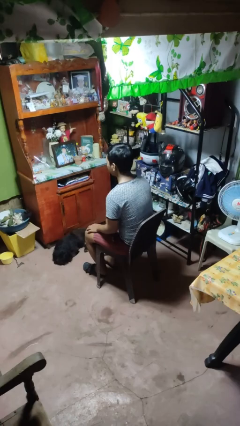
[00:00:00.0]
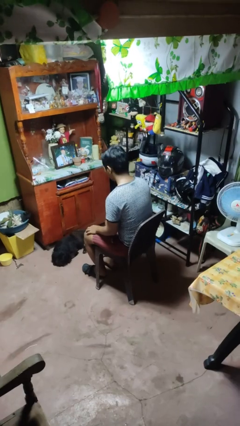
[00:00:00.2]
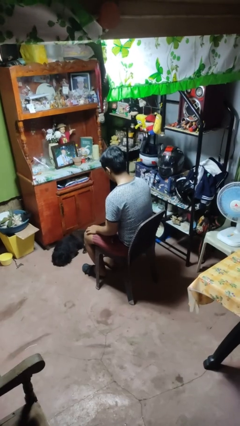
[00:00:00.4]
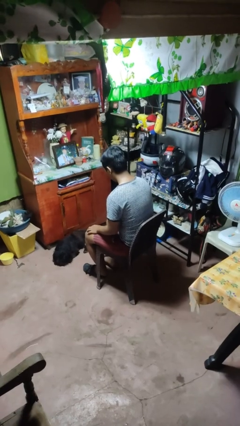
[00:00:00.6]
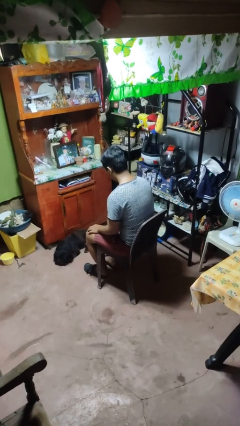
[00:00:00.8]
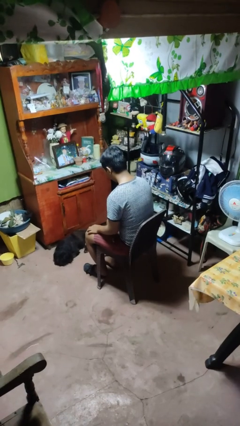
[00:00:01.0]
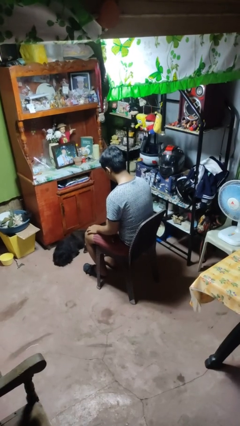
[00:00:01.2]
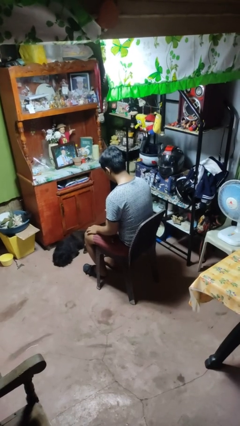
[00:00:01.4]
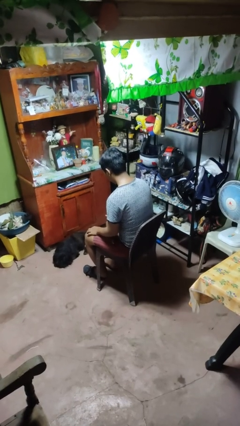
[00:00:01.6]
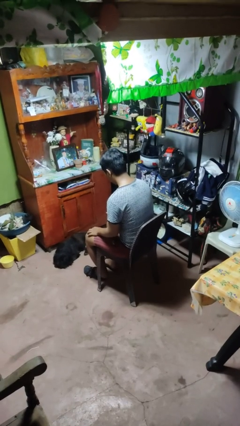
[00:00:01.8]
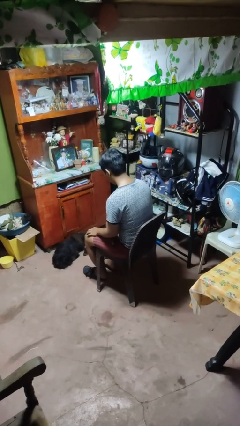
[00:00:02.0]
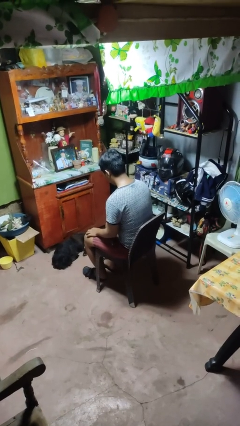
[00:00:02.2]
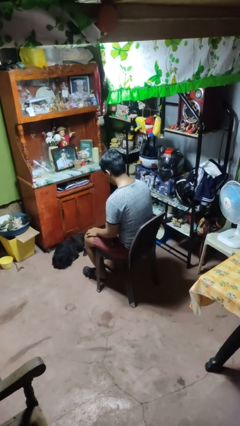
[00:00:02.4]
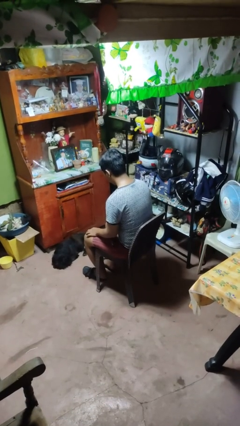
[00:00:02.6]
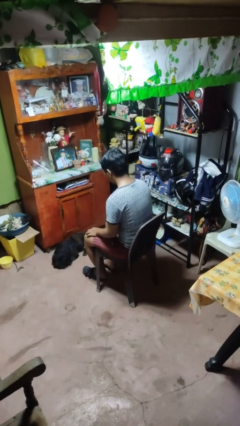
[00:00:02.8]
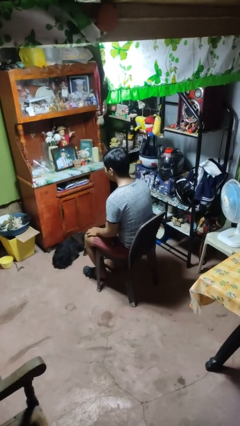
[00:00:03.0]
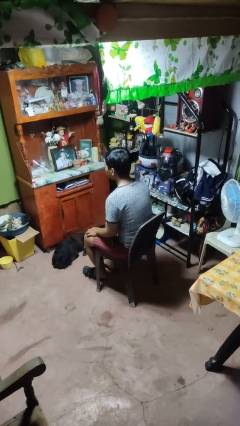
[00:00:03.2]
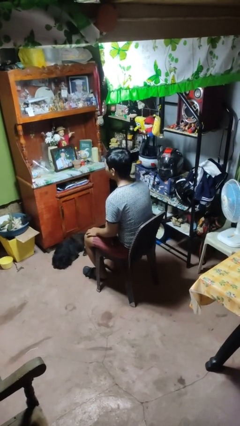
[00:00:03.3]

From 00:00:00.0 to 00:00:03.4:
person looks at hands in lap

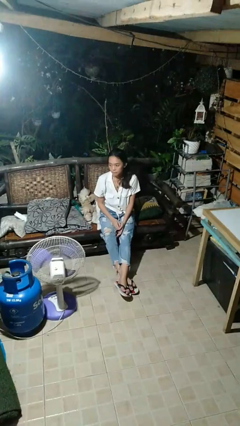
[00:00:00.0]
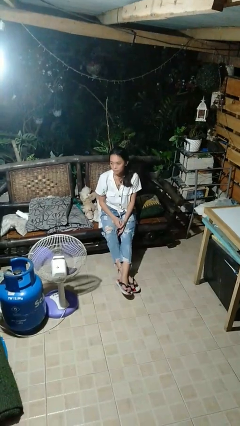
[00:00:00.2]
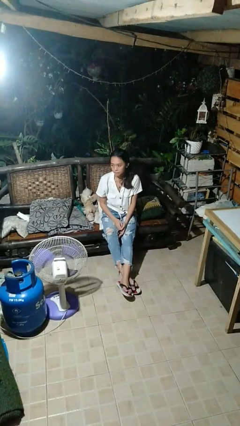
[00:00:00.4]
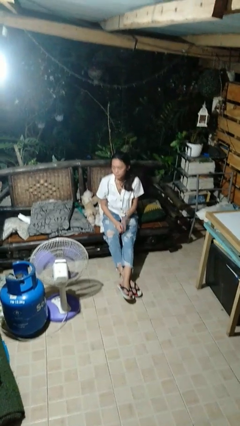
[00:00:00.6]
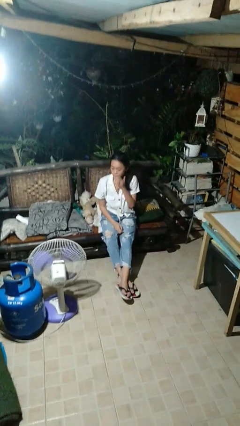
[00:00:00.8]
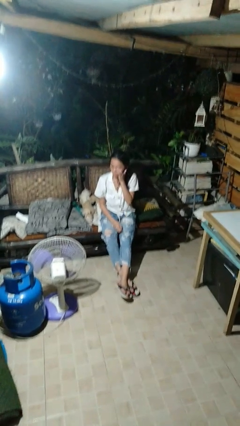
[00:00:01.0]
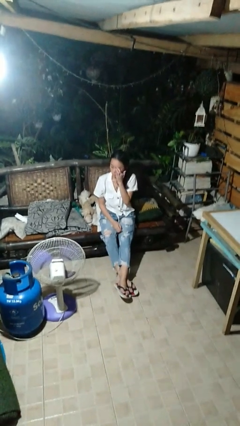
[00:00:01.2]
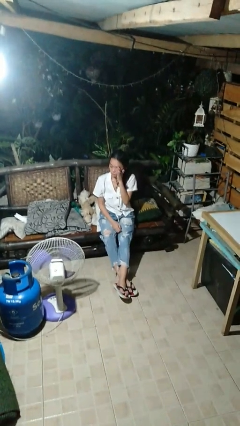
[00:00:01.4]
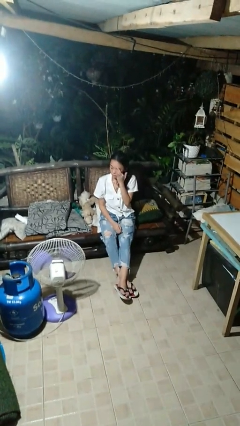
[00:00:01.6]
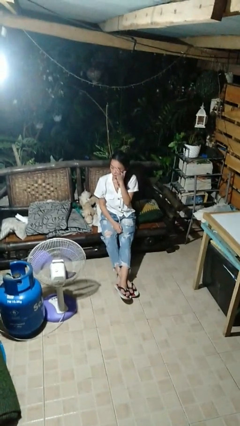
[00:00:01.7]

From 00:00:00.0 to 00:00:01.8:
person rubs eyes

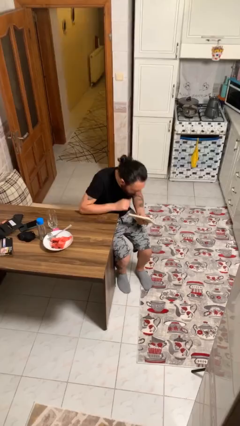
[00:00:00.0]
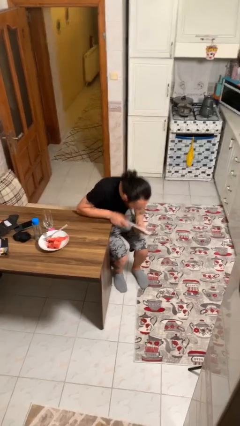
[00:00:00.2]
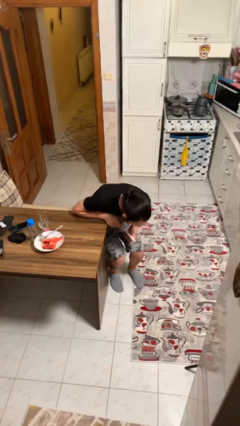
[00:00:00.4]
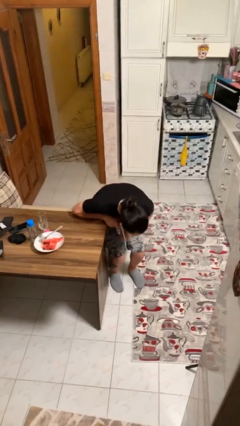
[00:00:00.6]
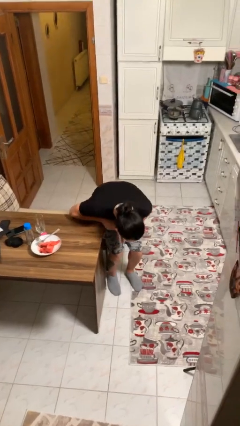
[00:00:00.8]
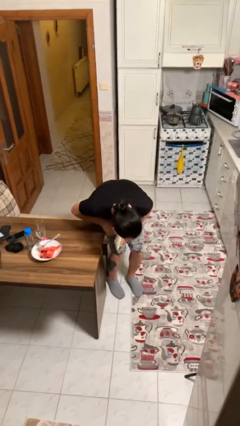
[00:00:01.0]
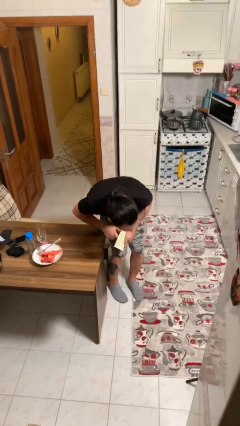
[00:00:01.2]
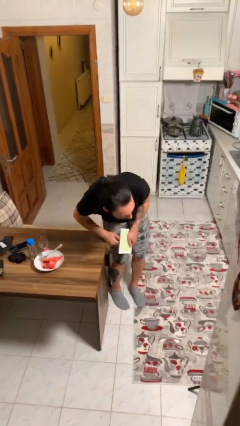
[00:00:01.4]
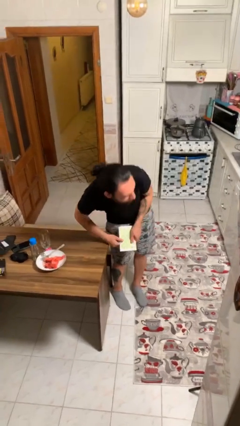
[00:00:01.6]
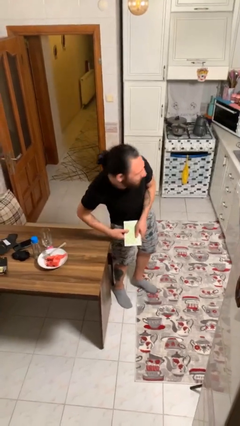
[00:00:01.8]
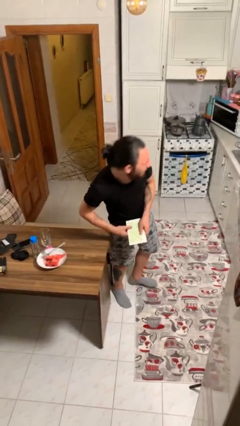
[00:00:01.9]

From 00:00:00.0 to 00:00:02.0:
person stands up

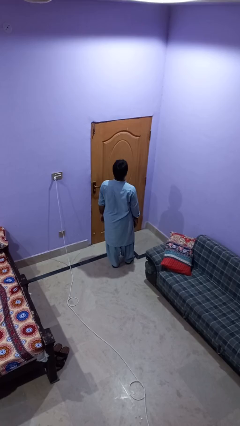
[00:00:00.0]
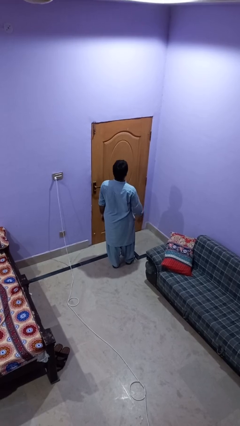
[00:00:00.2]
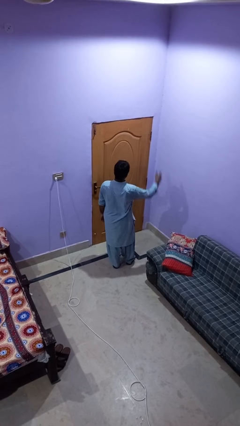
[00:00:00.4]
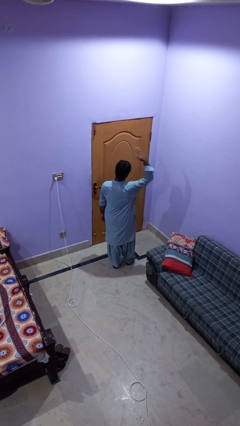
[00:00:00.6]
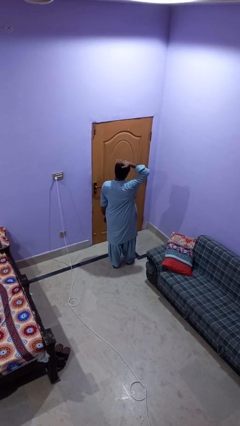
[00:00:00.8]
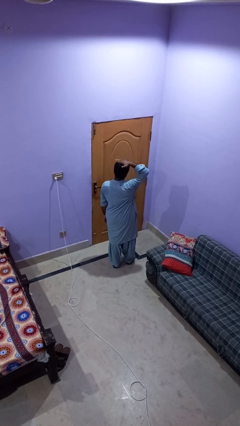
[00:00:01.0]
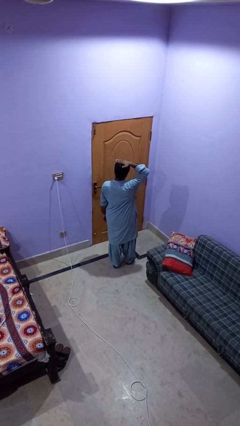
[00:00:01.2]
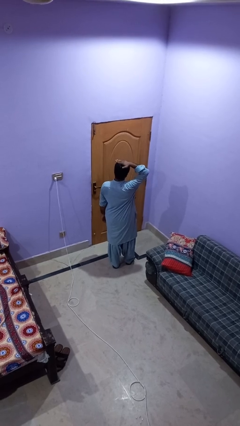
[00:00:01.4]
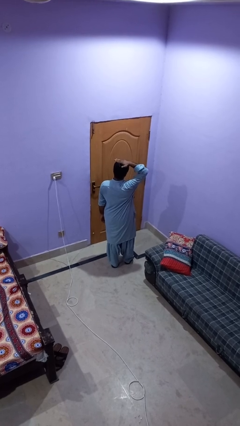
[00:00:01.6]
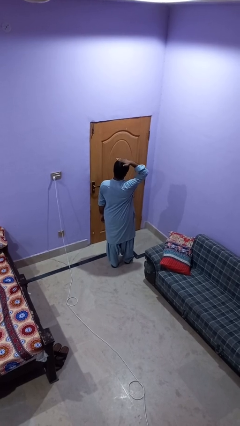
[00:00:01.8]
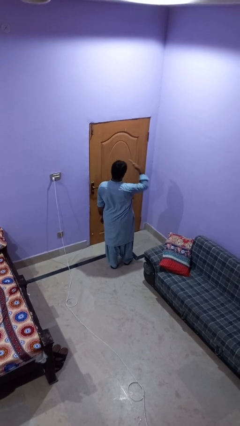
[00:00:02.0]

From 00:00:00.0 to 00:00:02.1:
person pats head

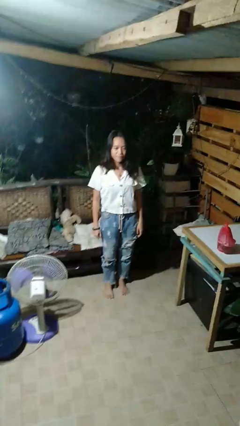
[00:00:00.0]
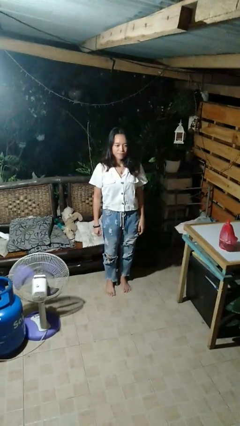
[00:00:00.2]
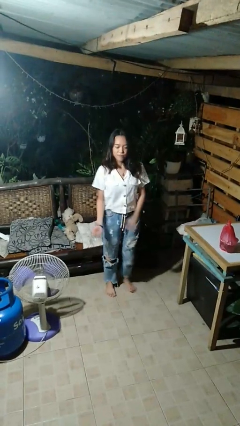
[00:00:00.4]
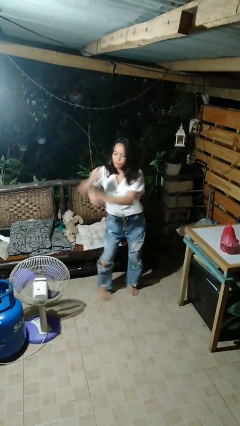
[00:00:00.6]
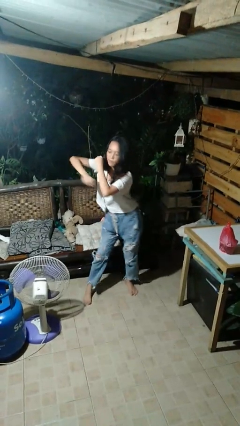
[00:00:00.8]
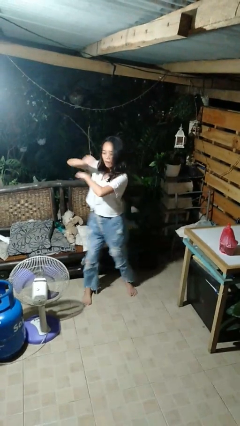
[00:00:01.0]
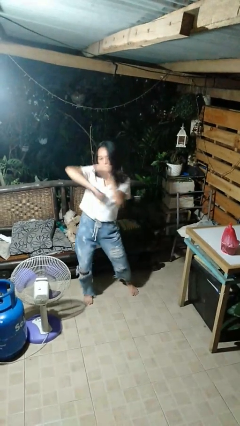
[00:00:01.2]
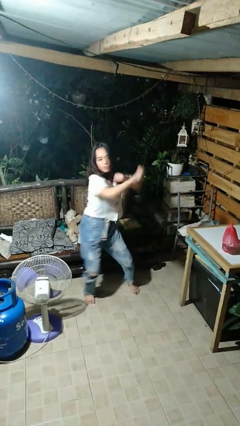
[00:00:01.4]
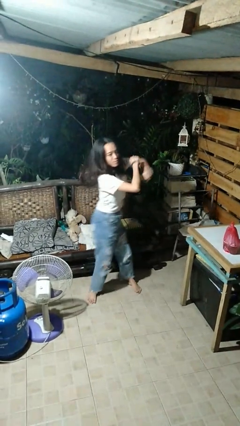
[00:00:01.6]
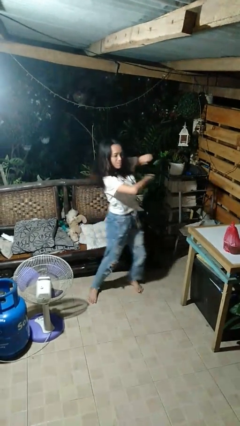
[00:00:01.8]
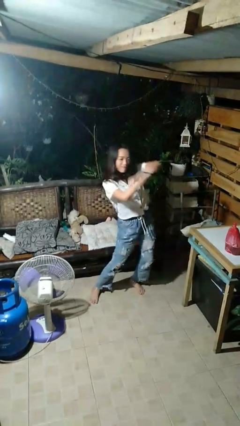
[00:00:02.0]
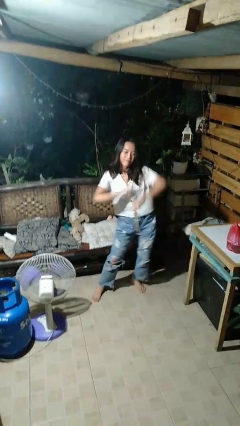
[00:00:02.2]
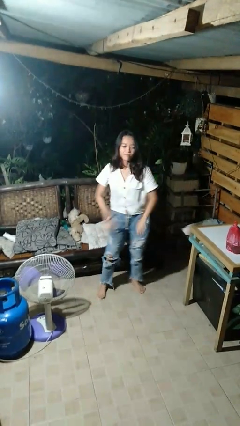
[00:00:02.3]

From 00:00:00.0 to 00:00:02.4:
person dances in place

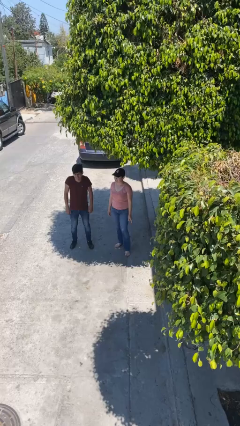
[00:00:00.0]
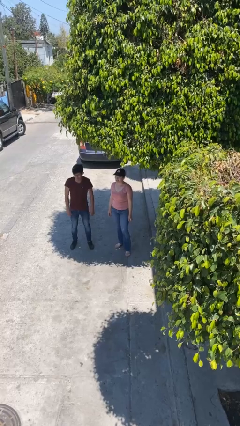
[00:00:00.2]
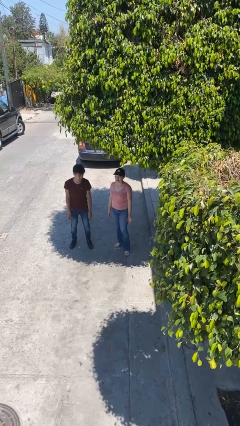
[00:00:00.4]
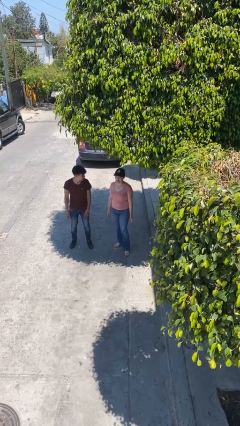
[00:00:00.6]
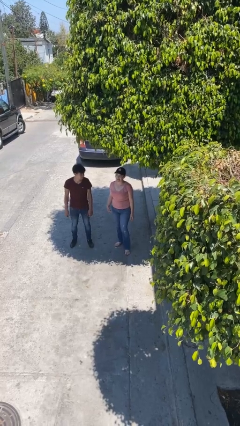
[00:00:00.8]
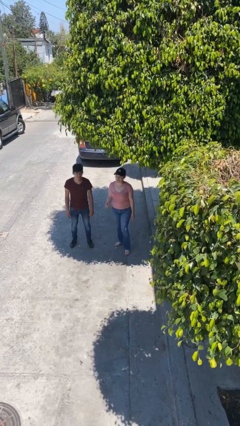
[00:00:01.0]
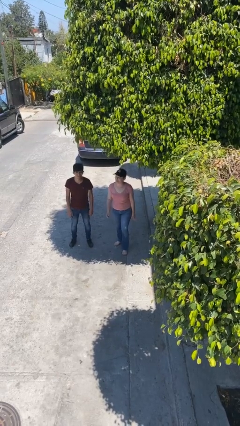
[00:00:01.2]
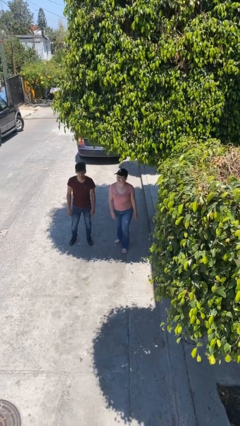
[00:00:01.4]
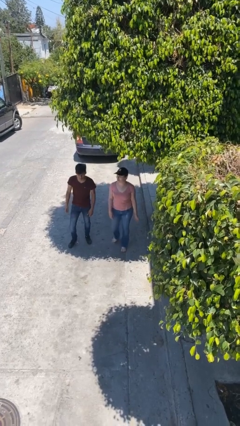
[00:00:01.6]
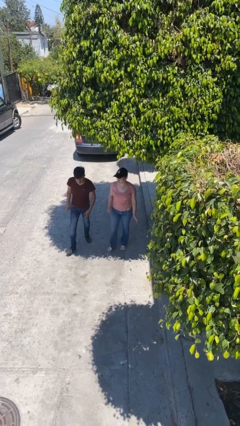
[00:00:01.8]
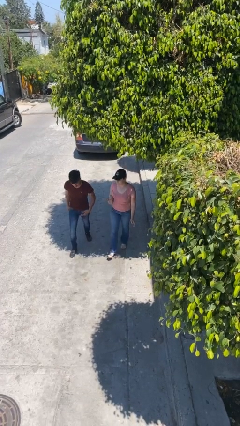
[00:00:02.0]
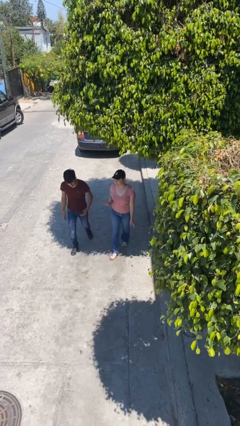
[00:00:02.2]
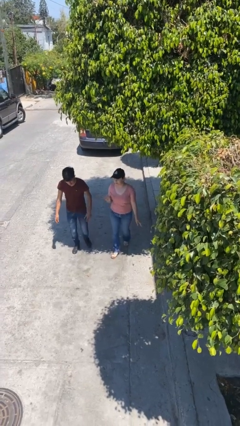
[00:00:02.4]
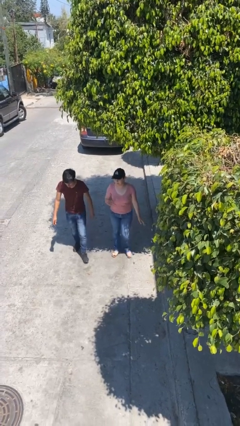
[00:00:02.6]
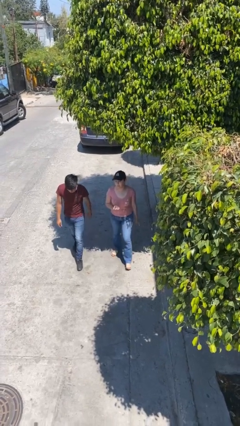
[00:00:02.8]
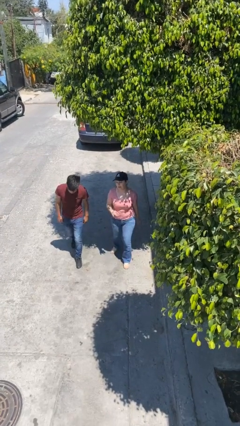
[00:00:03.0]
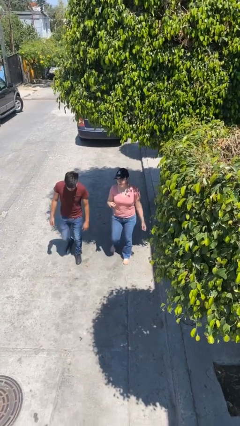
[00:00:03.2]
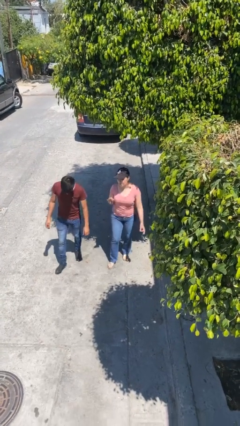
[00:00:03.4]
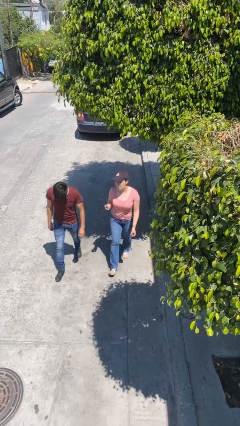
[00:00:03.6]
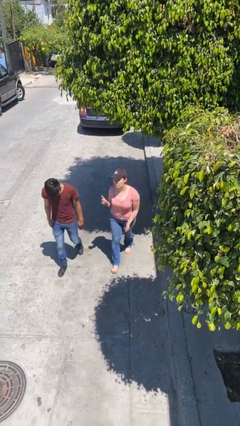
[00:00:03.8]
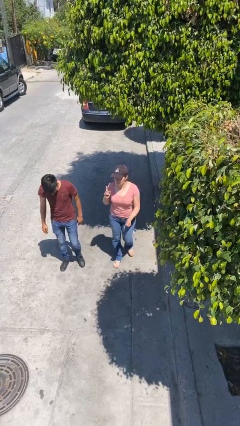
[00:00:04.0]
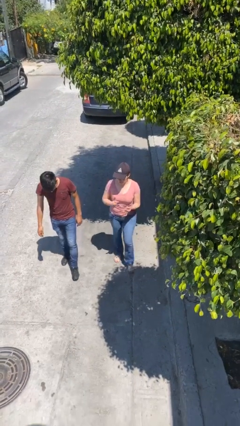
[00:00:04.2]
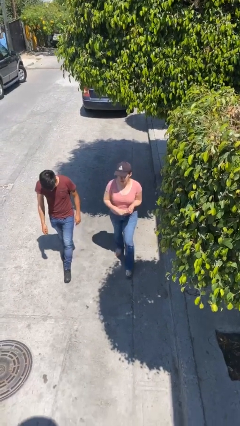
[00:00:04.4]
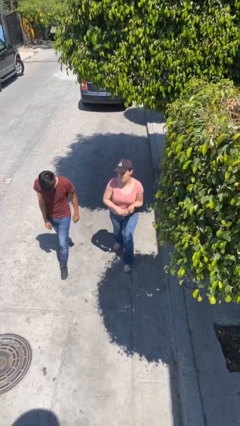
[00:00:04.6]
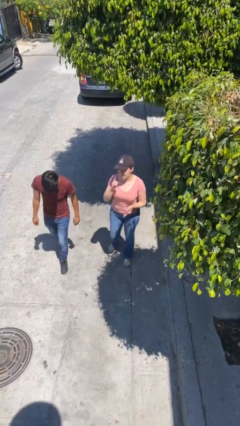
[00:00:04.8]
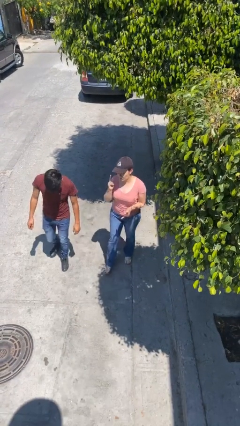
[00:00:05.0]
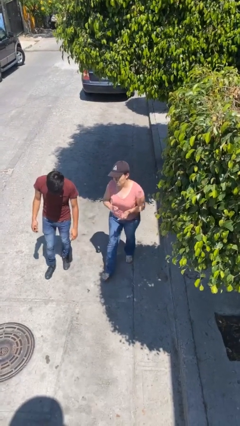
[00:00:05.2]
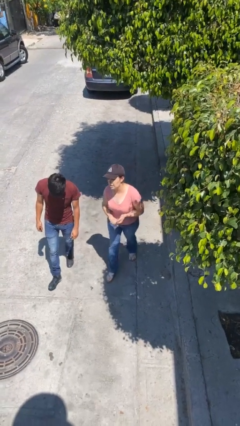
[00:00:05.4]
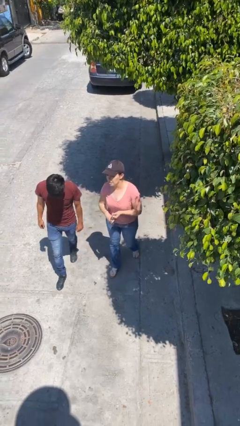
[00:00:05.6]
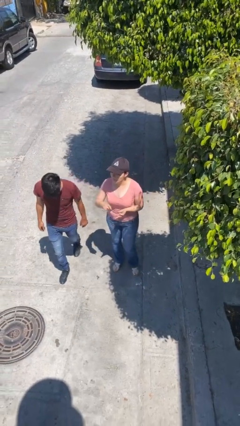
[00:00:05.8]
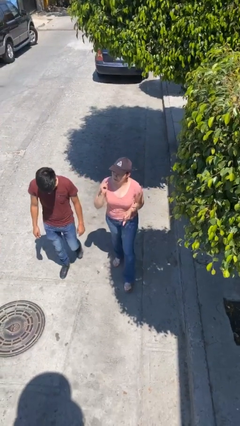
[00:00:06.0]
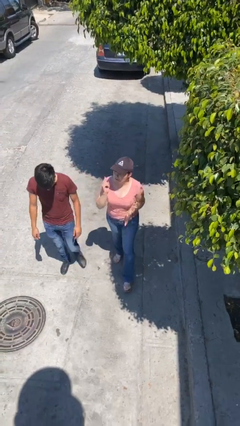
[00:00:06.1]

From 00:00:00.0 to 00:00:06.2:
person talks to person
